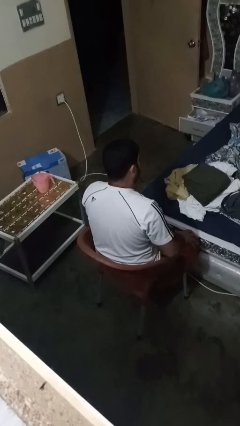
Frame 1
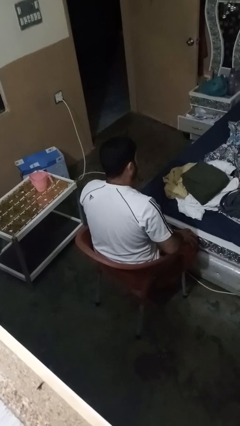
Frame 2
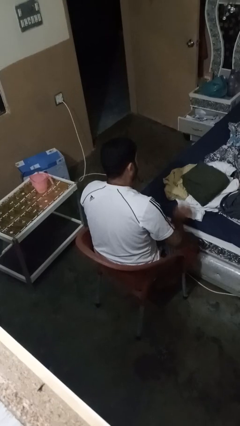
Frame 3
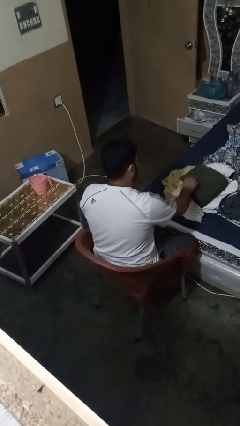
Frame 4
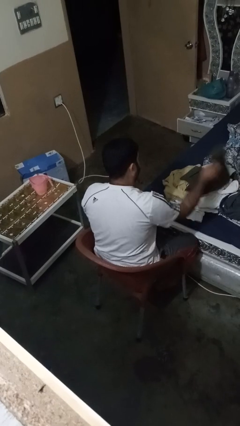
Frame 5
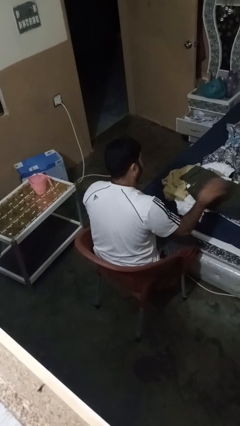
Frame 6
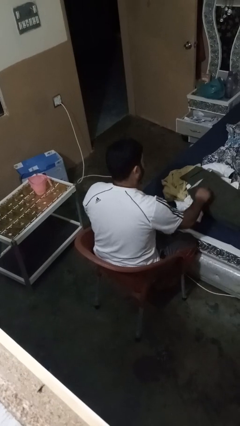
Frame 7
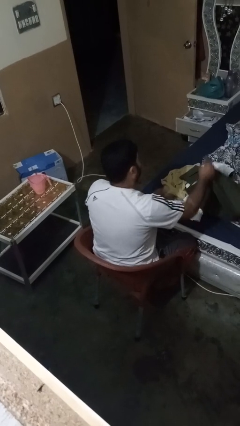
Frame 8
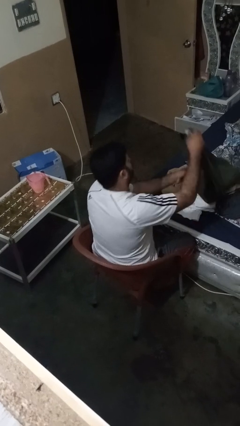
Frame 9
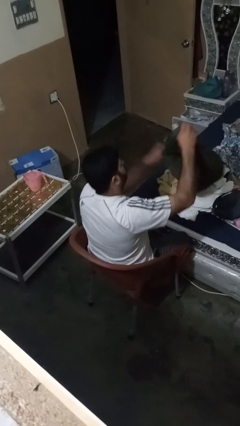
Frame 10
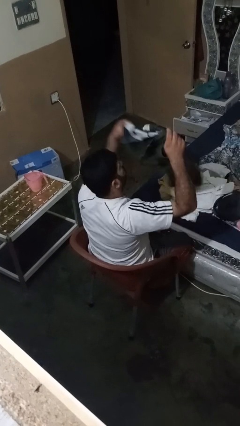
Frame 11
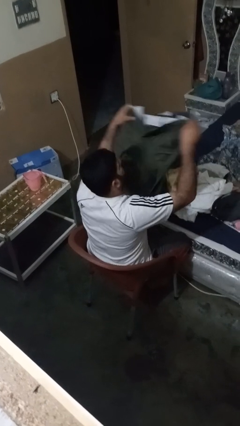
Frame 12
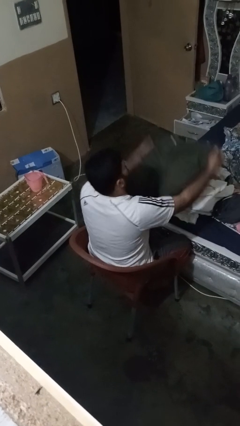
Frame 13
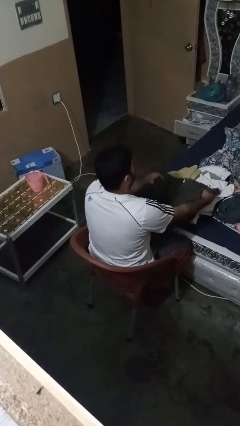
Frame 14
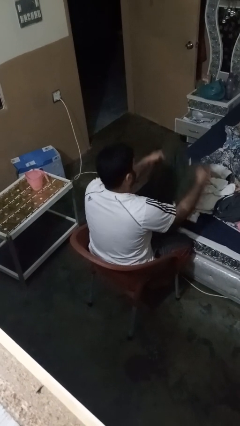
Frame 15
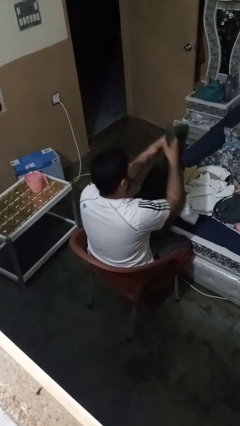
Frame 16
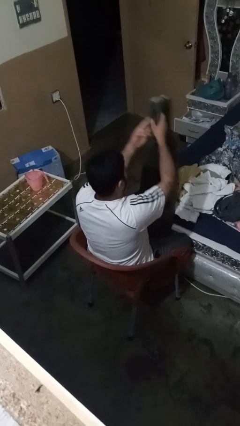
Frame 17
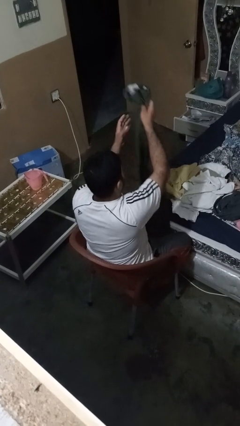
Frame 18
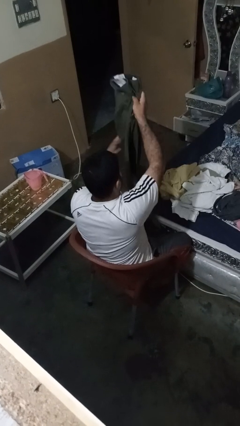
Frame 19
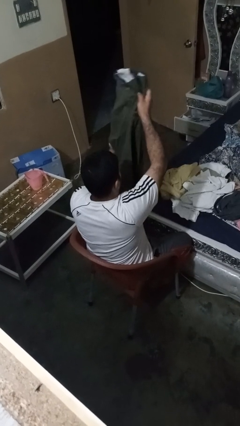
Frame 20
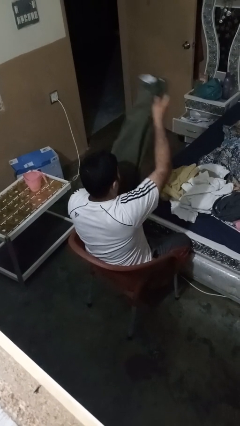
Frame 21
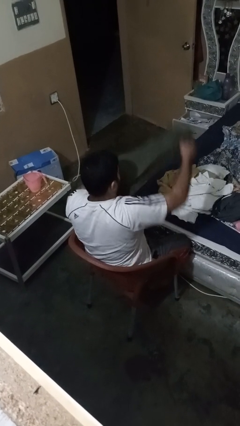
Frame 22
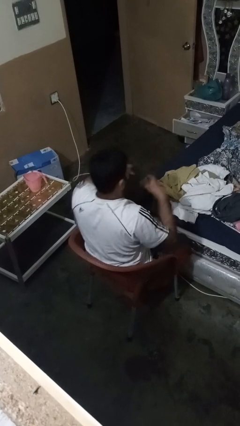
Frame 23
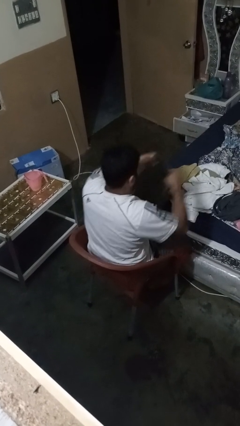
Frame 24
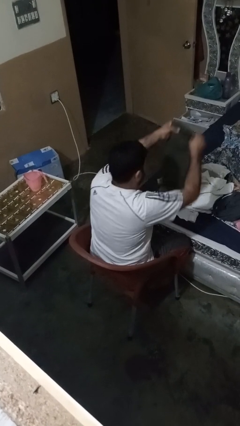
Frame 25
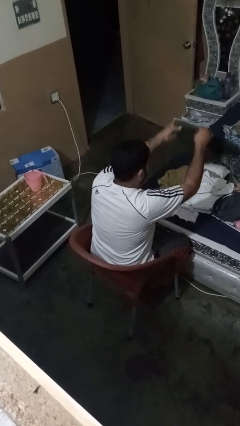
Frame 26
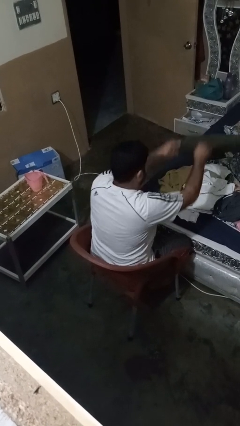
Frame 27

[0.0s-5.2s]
person folds pants

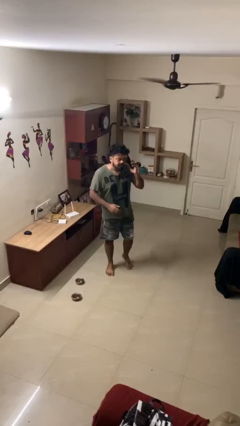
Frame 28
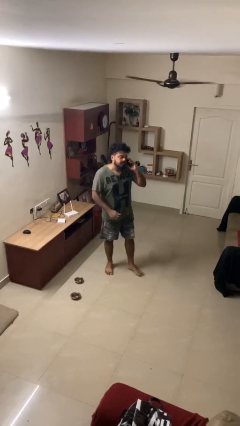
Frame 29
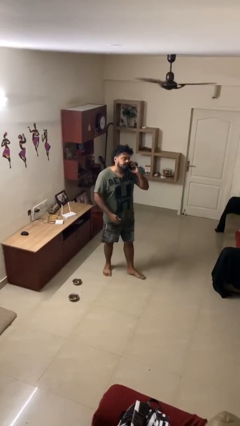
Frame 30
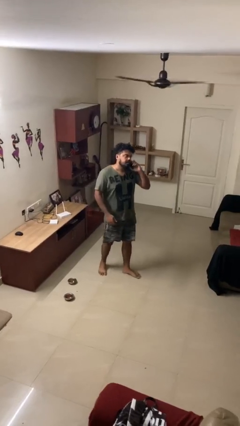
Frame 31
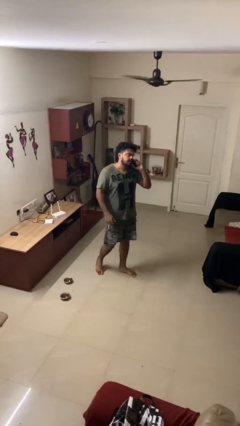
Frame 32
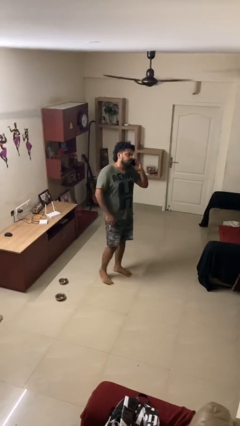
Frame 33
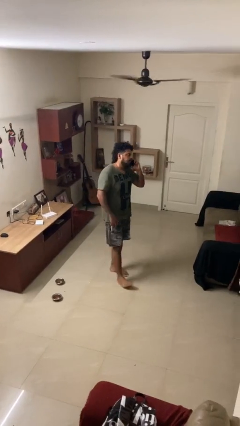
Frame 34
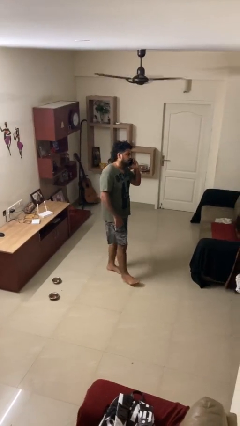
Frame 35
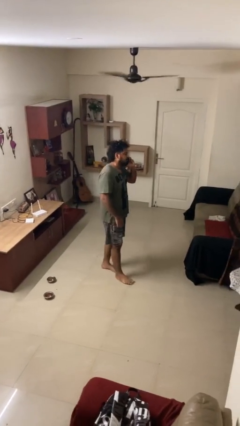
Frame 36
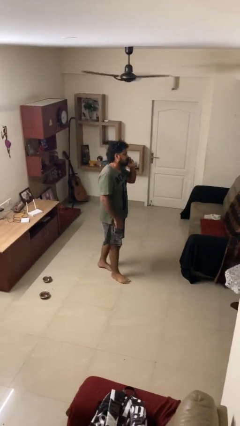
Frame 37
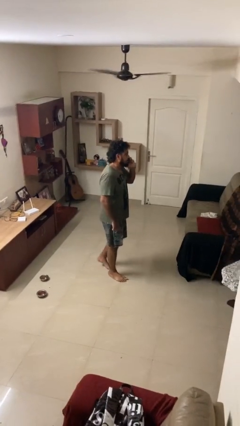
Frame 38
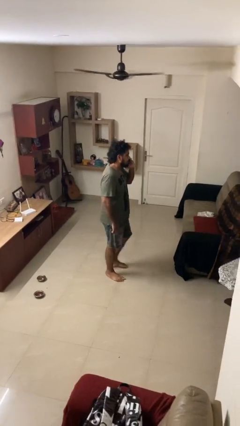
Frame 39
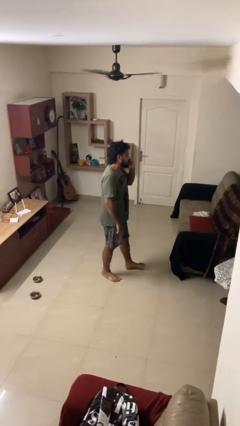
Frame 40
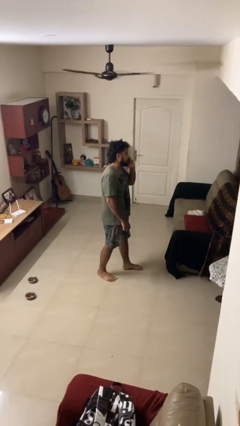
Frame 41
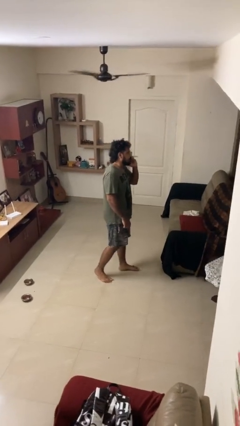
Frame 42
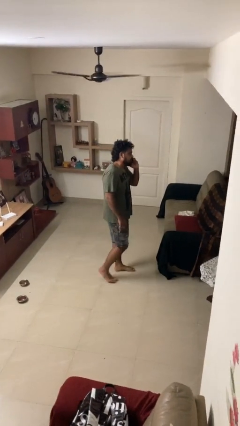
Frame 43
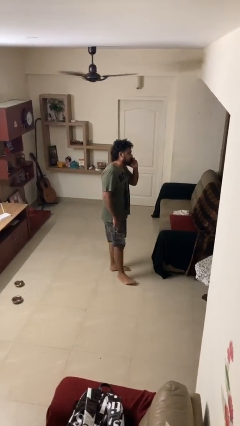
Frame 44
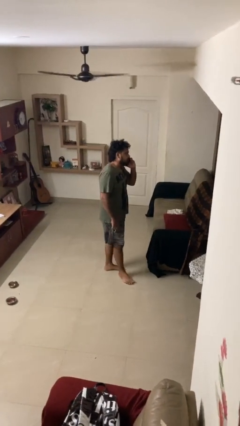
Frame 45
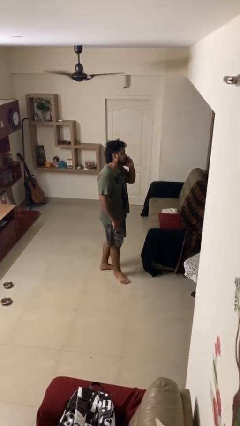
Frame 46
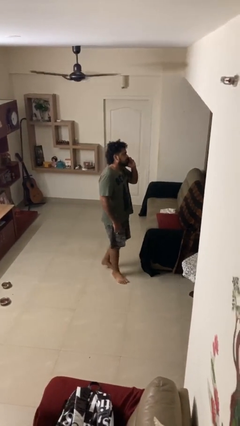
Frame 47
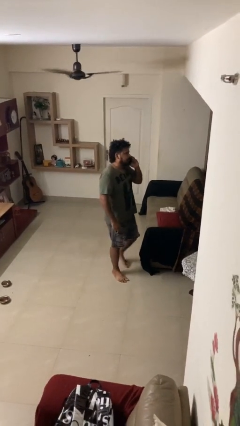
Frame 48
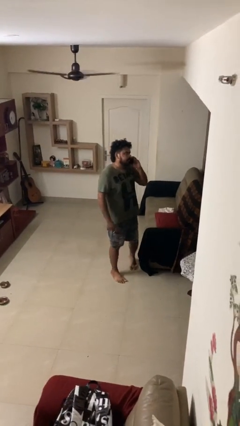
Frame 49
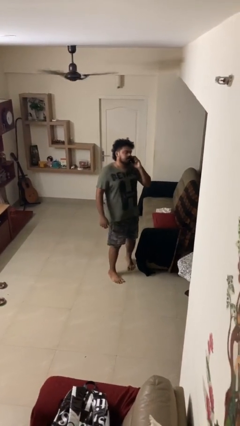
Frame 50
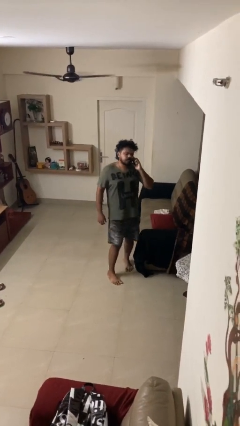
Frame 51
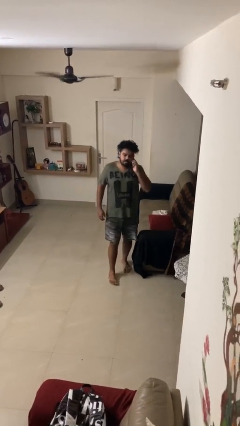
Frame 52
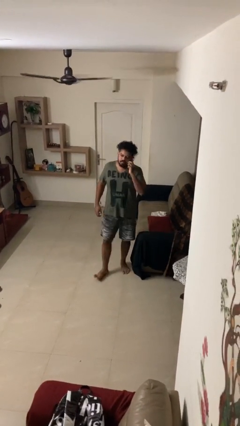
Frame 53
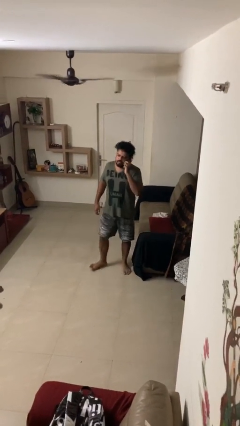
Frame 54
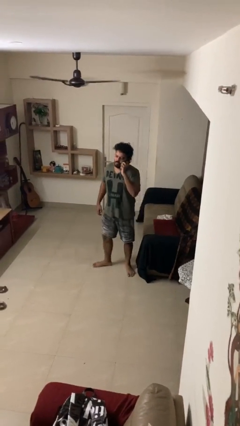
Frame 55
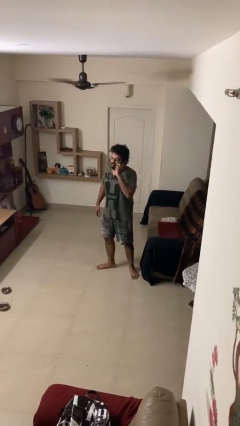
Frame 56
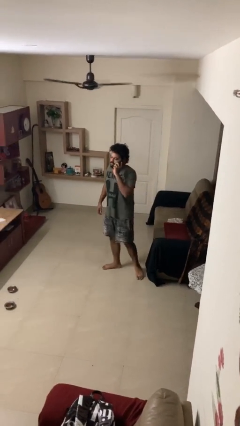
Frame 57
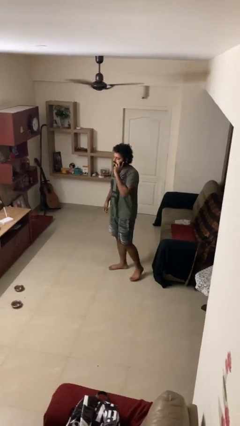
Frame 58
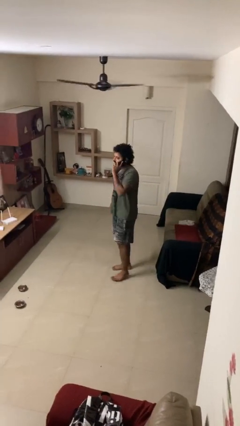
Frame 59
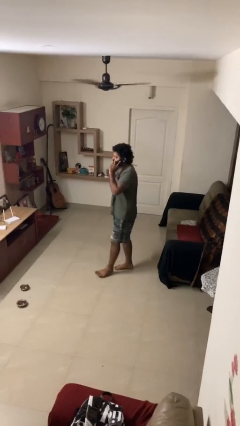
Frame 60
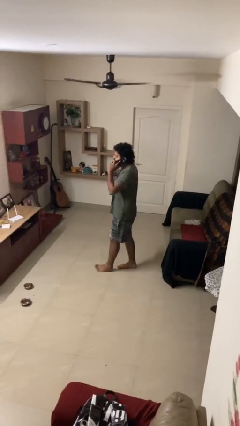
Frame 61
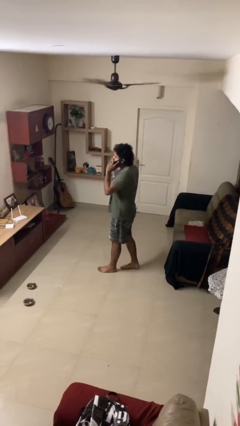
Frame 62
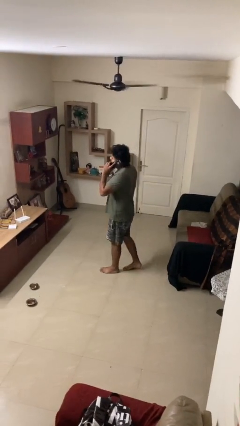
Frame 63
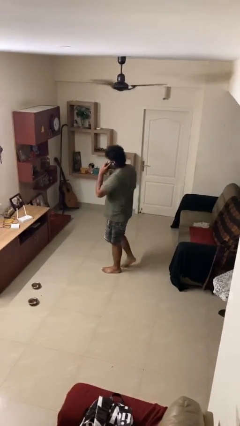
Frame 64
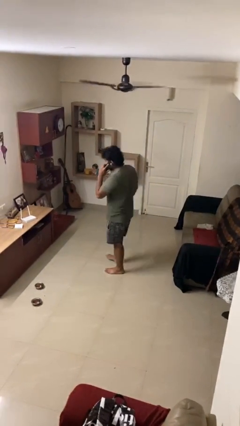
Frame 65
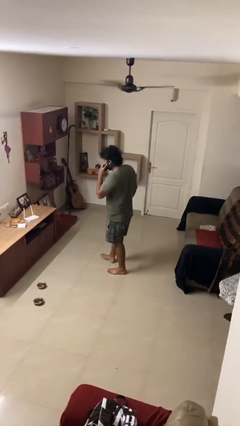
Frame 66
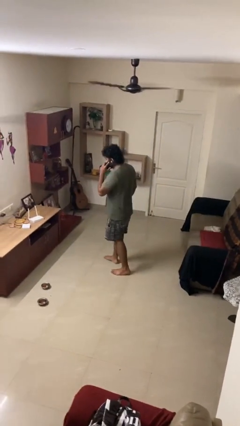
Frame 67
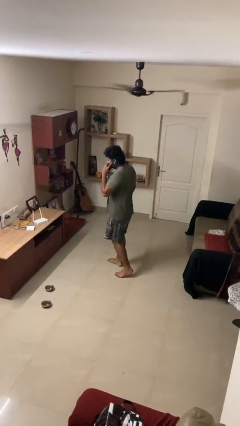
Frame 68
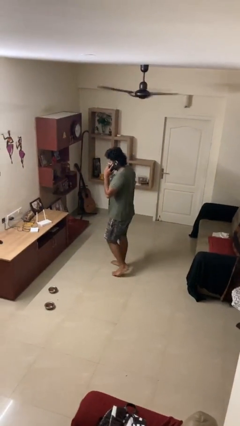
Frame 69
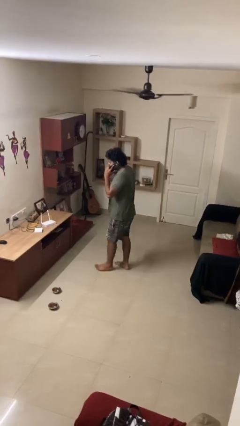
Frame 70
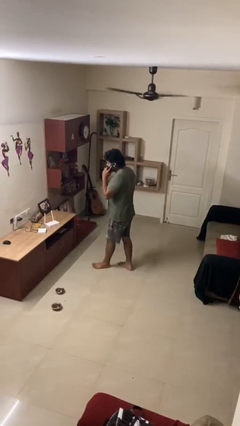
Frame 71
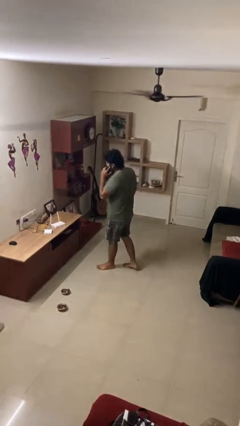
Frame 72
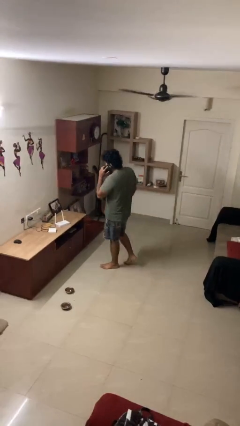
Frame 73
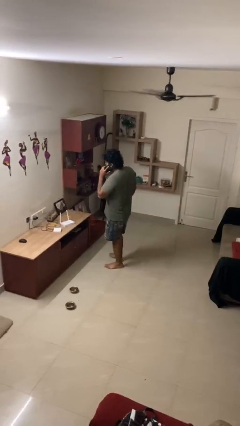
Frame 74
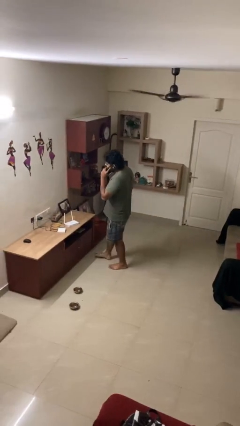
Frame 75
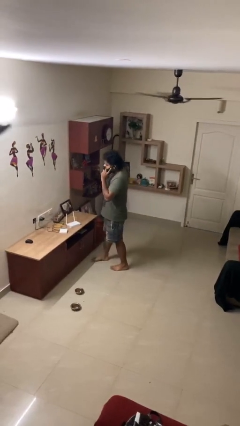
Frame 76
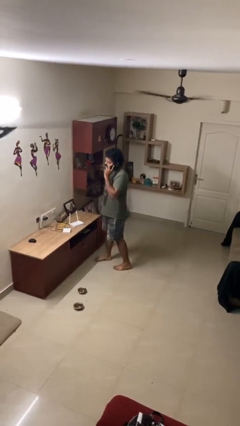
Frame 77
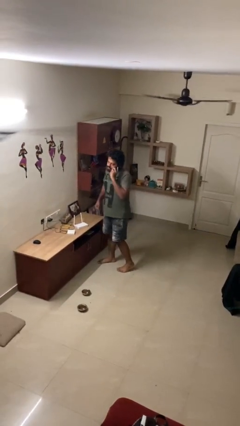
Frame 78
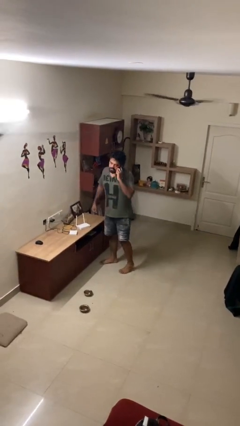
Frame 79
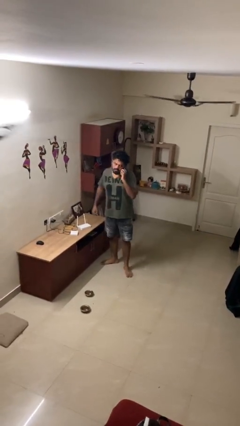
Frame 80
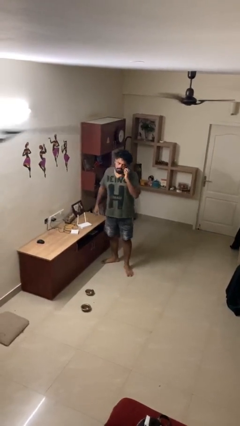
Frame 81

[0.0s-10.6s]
person talks on phone

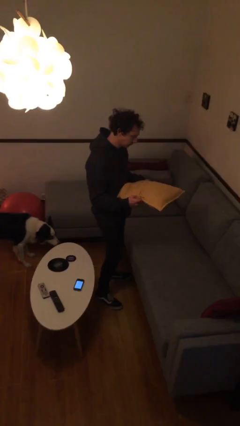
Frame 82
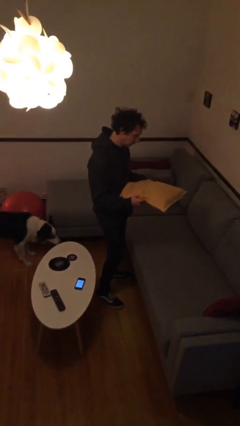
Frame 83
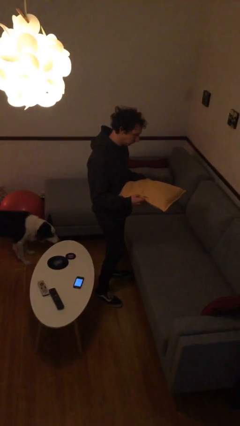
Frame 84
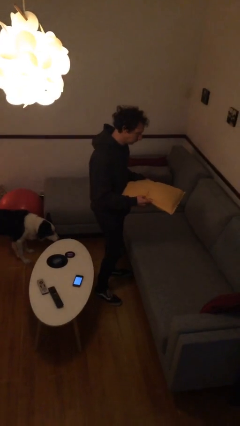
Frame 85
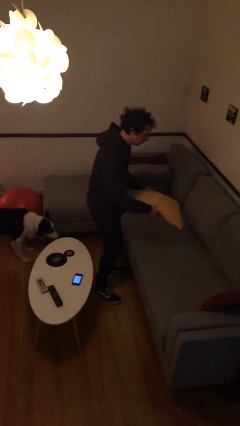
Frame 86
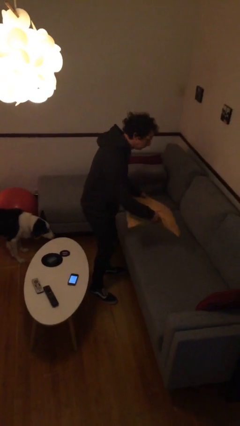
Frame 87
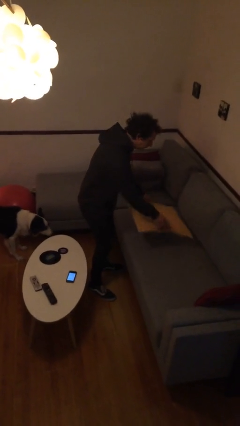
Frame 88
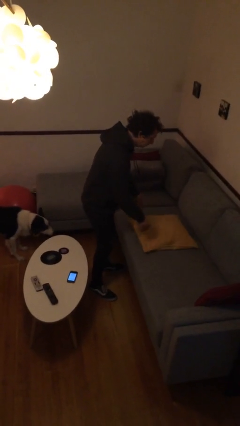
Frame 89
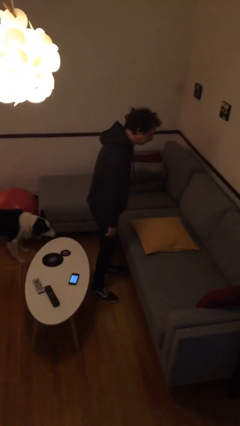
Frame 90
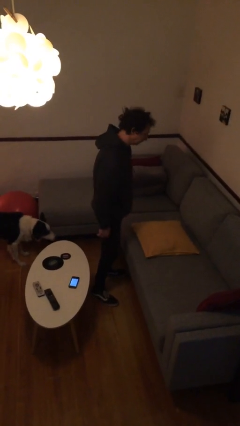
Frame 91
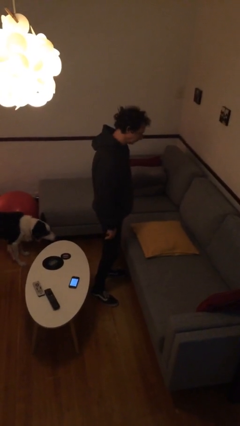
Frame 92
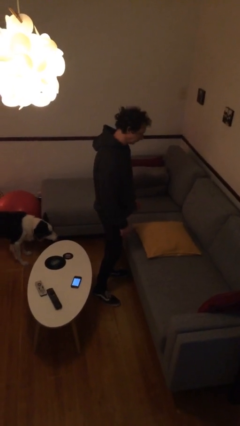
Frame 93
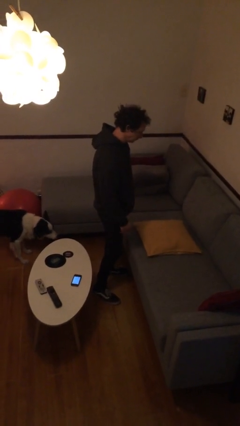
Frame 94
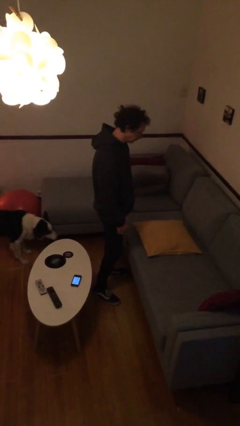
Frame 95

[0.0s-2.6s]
person puts down object on couch
